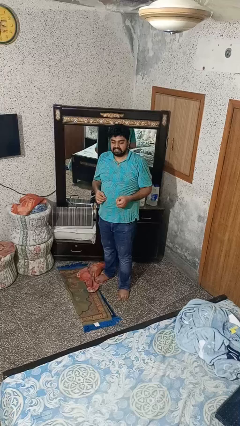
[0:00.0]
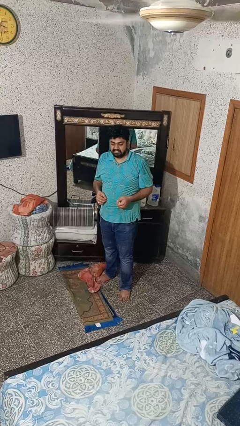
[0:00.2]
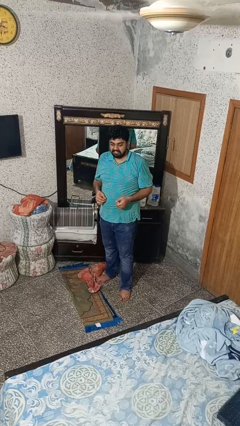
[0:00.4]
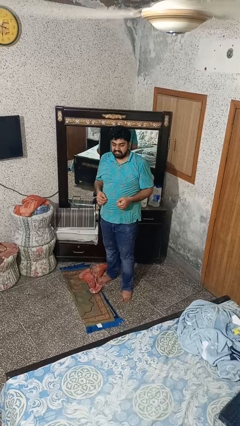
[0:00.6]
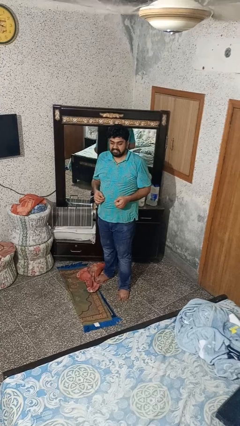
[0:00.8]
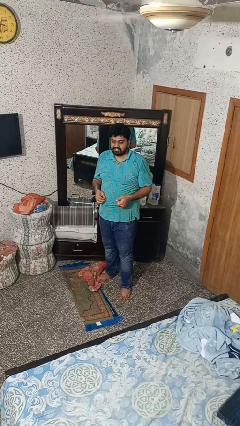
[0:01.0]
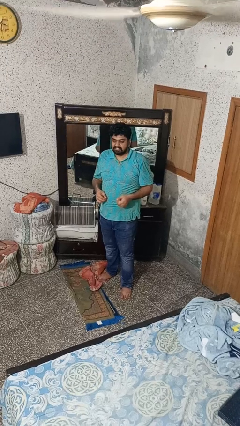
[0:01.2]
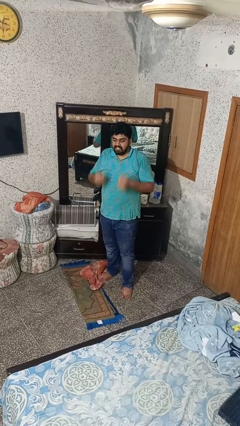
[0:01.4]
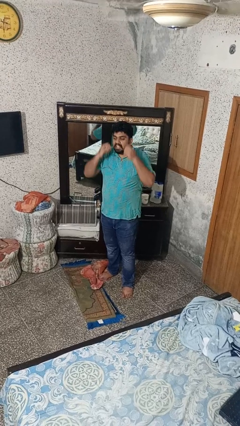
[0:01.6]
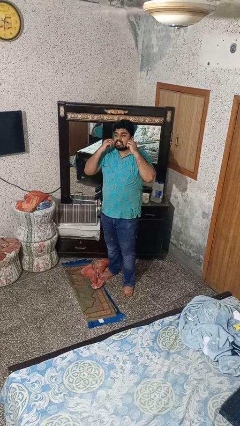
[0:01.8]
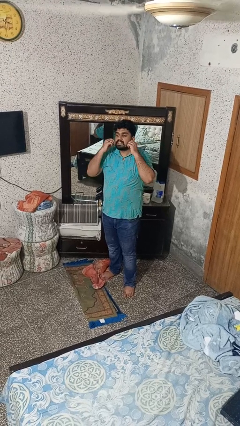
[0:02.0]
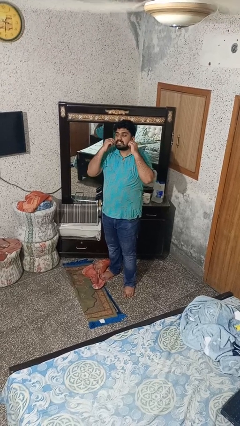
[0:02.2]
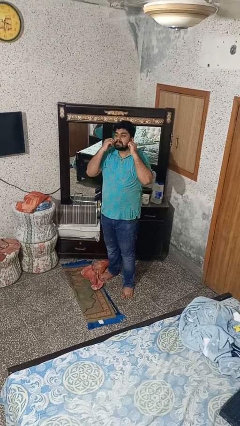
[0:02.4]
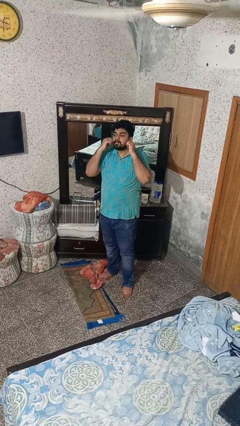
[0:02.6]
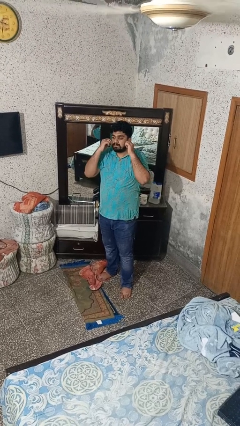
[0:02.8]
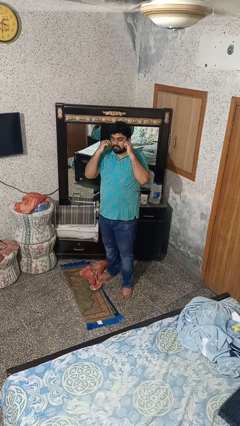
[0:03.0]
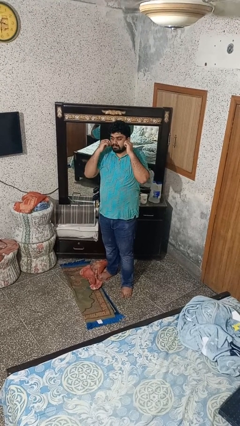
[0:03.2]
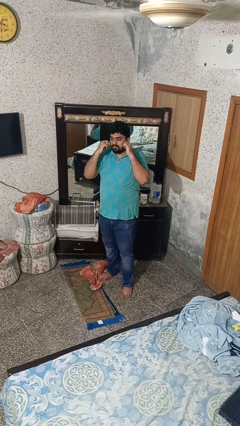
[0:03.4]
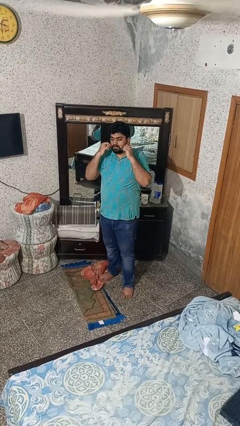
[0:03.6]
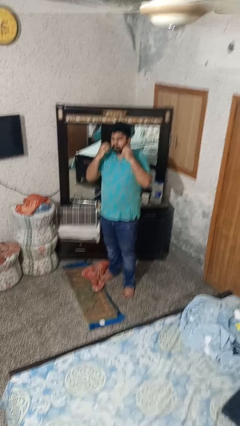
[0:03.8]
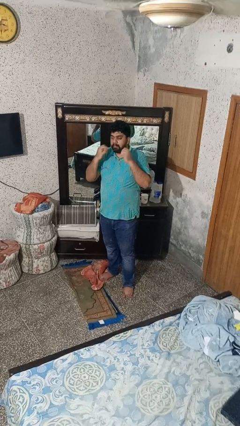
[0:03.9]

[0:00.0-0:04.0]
person flosses

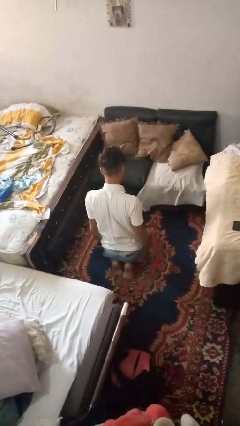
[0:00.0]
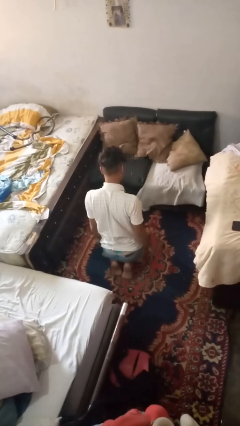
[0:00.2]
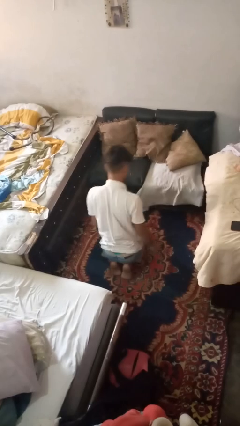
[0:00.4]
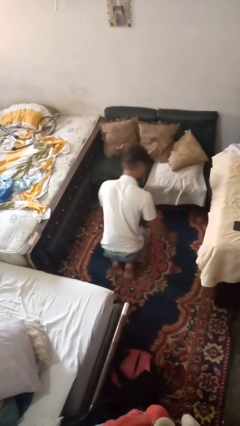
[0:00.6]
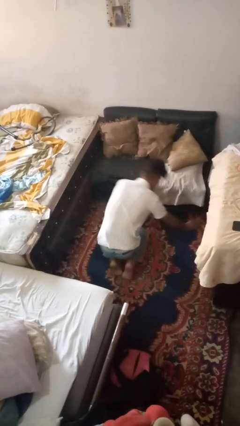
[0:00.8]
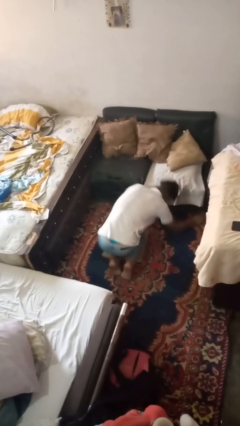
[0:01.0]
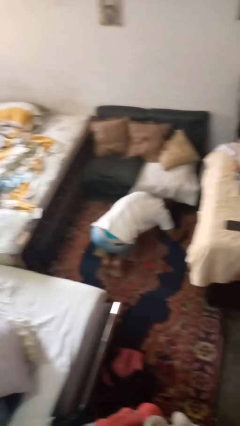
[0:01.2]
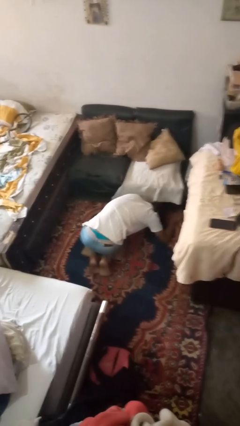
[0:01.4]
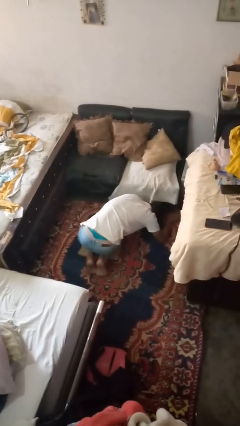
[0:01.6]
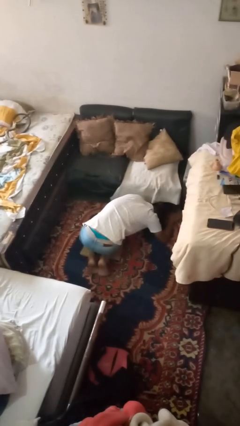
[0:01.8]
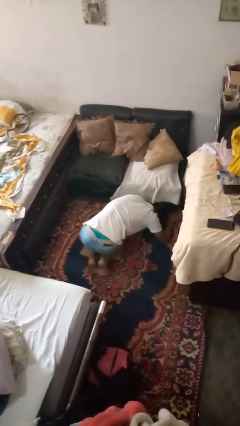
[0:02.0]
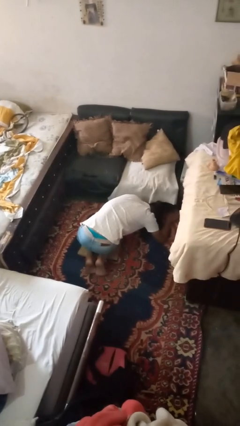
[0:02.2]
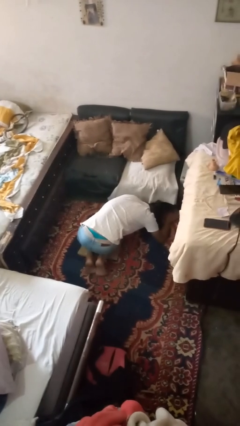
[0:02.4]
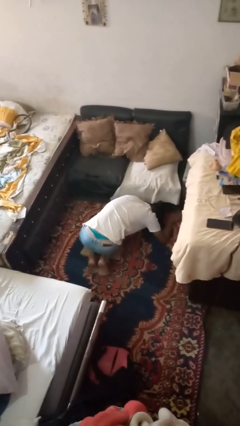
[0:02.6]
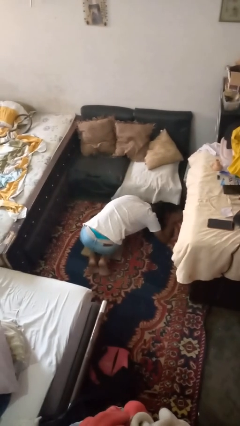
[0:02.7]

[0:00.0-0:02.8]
person searches under couch

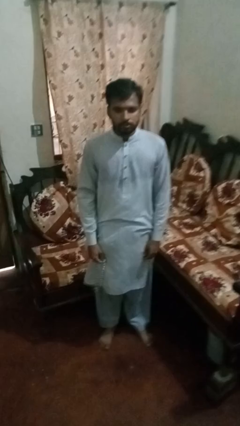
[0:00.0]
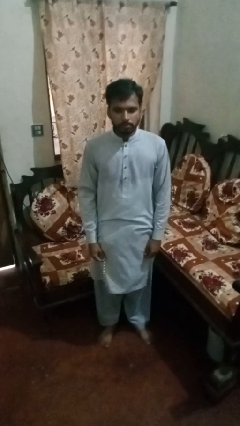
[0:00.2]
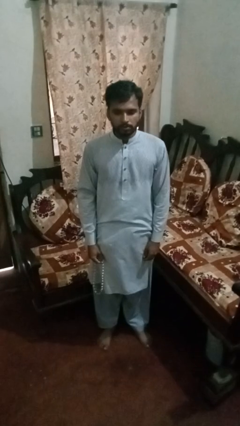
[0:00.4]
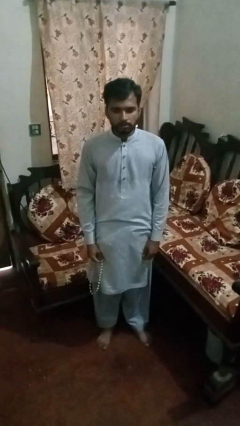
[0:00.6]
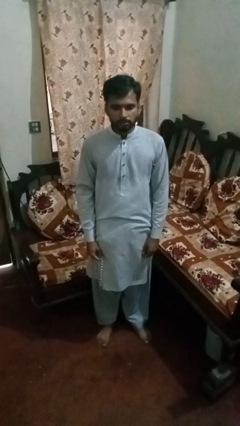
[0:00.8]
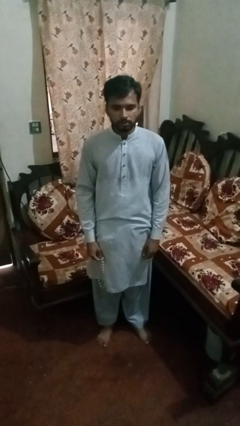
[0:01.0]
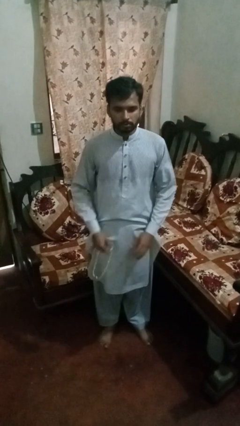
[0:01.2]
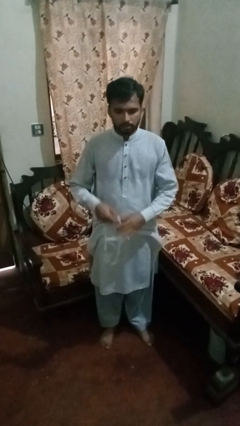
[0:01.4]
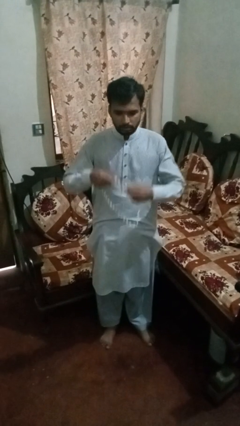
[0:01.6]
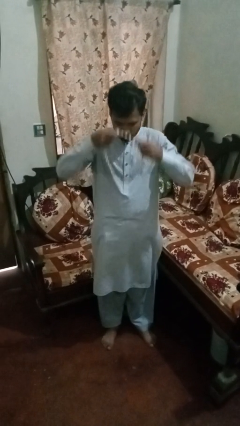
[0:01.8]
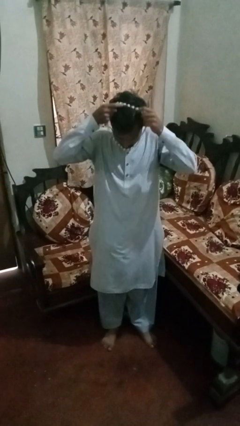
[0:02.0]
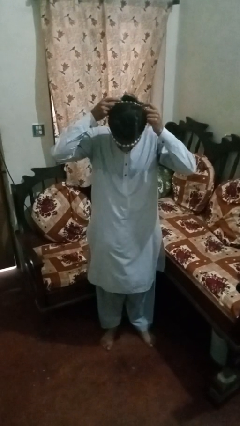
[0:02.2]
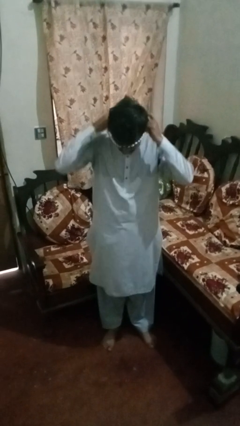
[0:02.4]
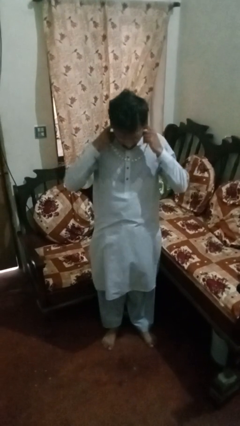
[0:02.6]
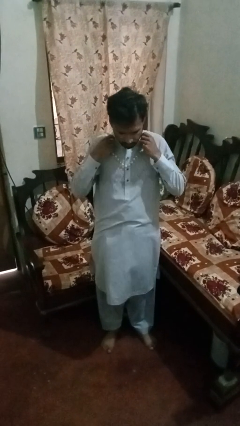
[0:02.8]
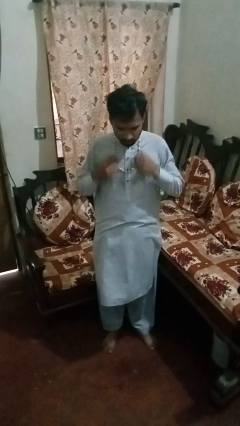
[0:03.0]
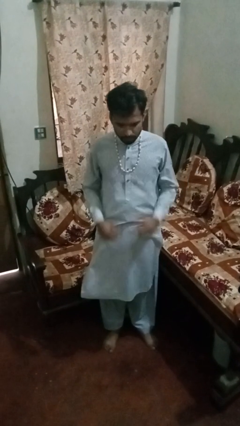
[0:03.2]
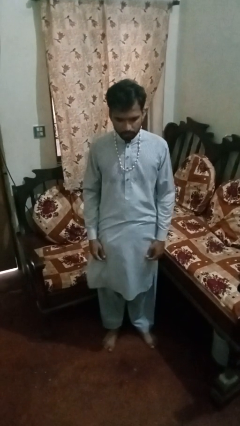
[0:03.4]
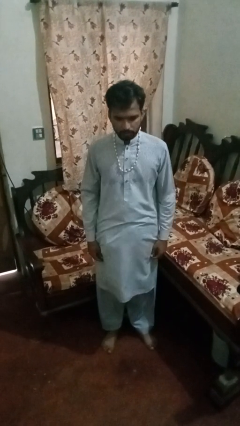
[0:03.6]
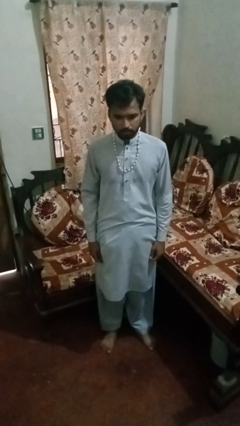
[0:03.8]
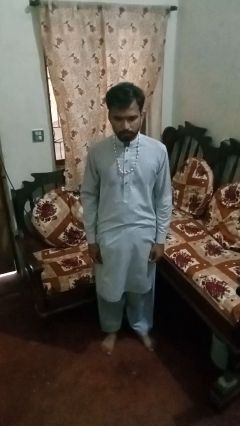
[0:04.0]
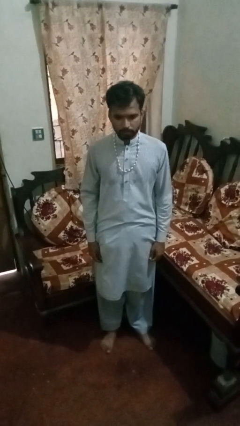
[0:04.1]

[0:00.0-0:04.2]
person puts on necklace

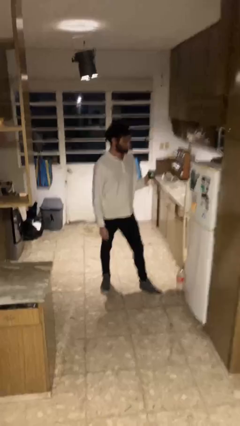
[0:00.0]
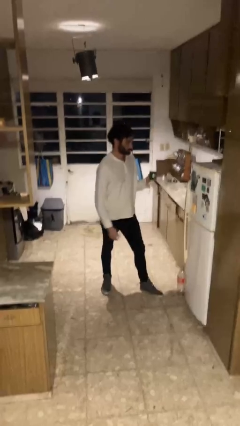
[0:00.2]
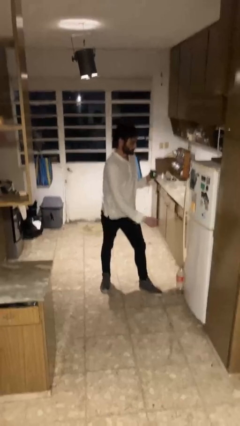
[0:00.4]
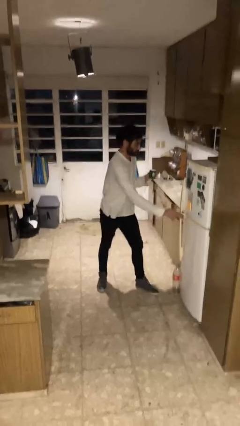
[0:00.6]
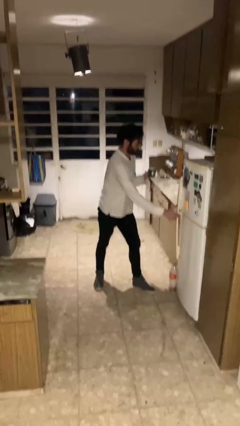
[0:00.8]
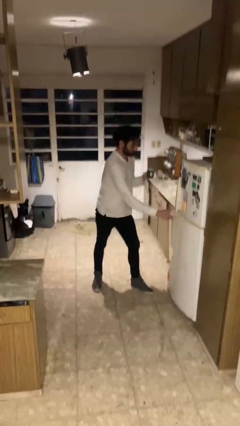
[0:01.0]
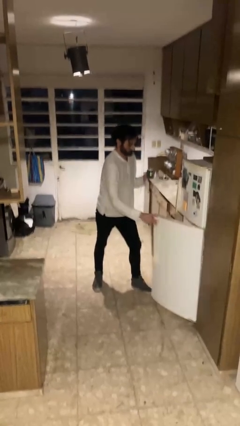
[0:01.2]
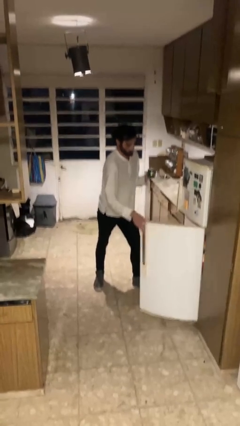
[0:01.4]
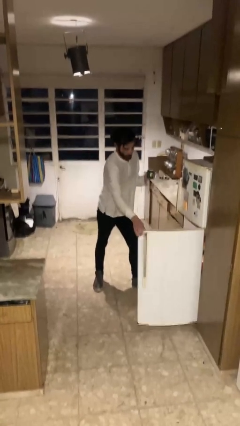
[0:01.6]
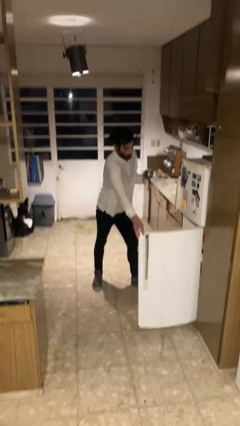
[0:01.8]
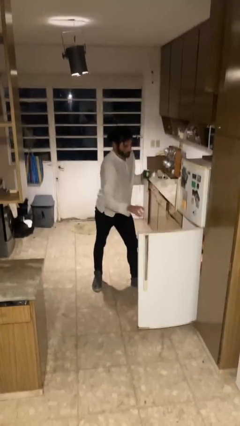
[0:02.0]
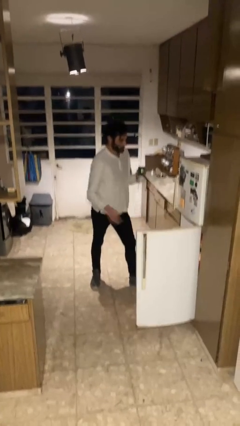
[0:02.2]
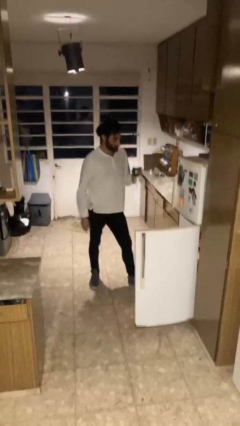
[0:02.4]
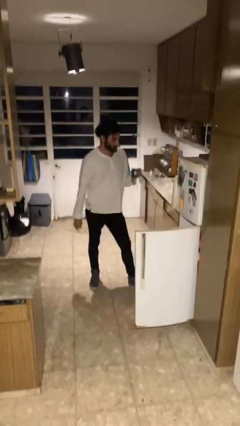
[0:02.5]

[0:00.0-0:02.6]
person opens refrigerator

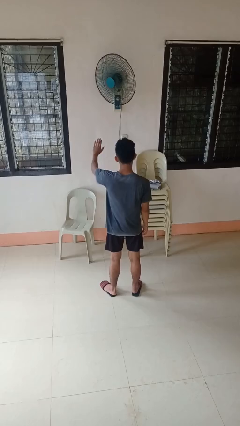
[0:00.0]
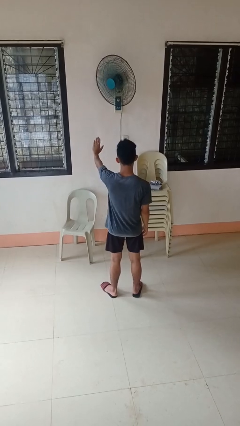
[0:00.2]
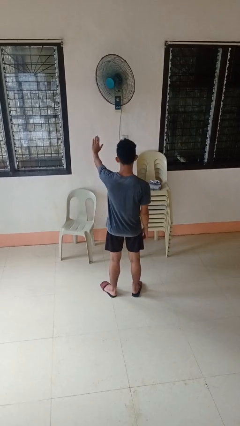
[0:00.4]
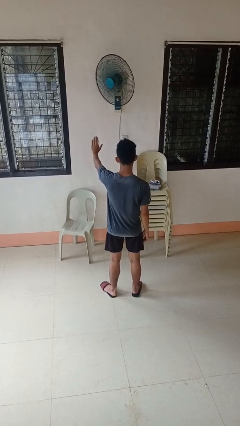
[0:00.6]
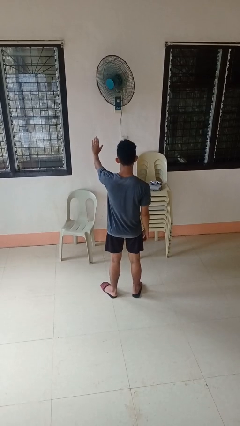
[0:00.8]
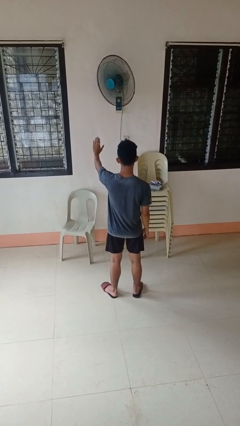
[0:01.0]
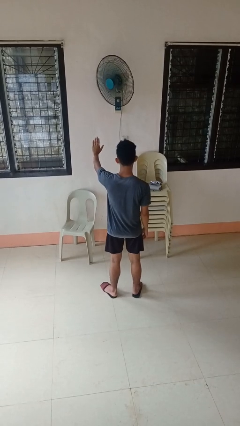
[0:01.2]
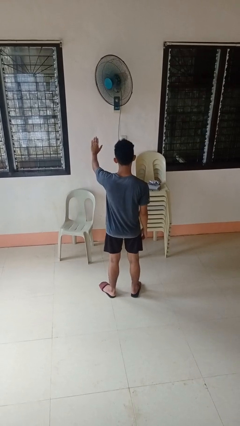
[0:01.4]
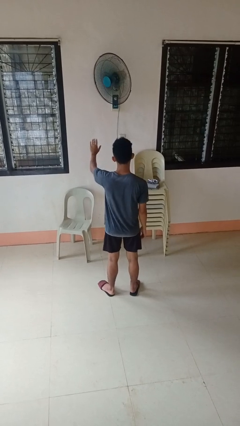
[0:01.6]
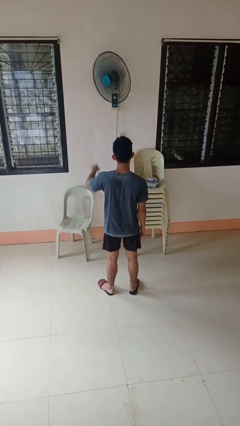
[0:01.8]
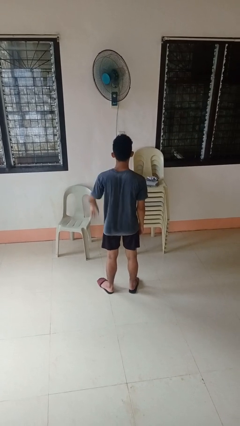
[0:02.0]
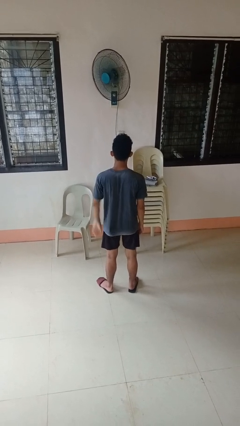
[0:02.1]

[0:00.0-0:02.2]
person gestures stop

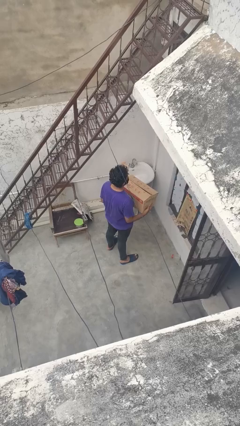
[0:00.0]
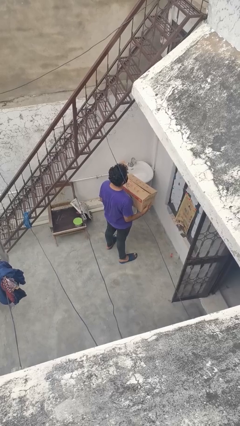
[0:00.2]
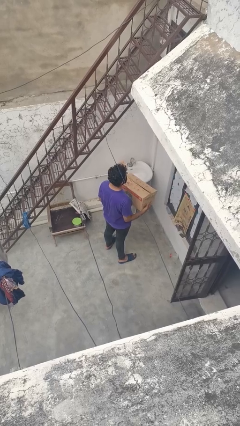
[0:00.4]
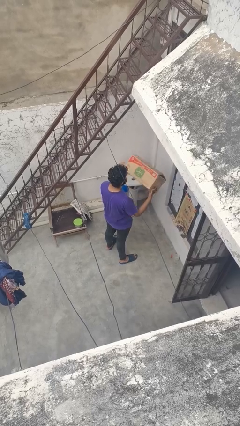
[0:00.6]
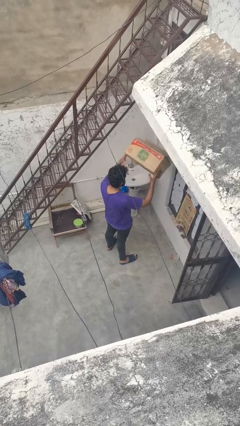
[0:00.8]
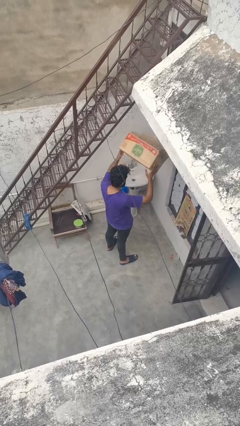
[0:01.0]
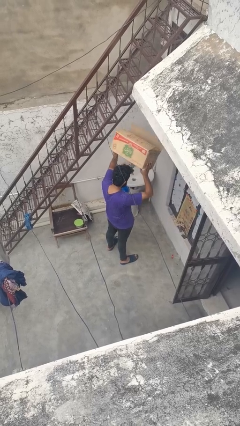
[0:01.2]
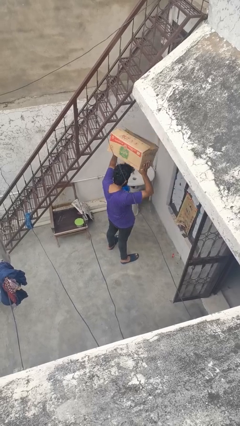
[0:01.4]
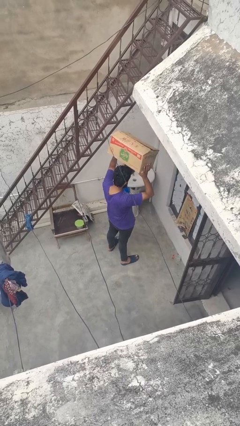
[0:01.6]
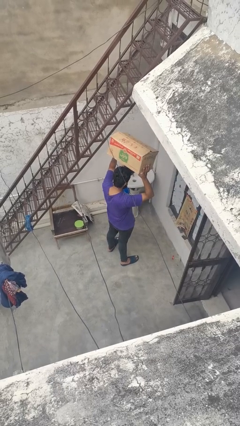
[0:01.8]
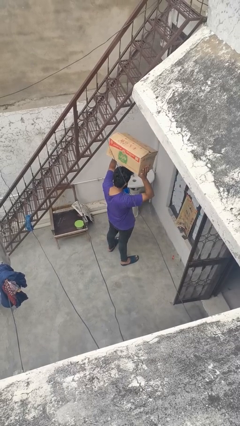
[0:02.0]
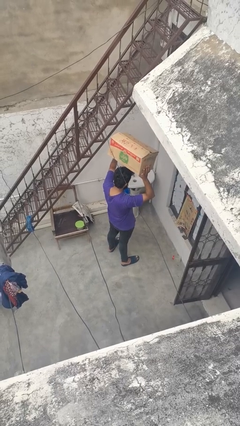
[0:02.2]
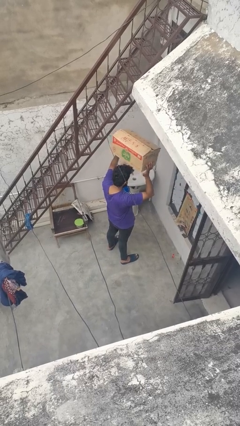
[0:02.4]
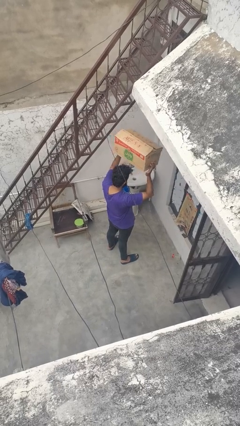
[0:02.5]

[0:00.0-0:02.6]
person holds object above head
